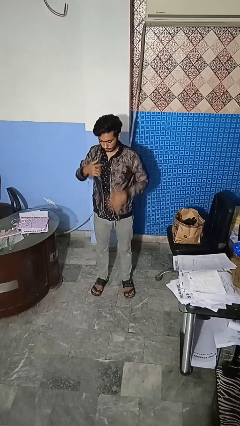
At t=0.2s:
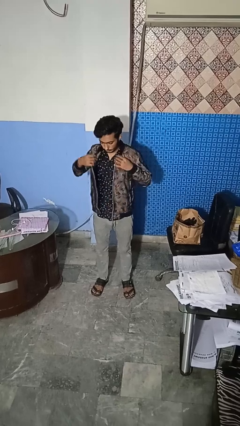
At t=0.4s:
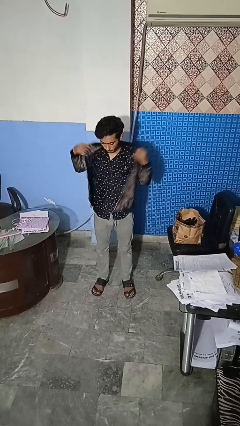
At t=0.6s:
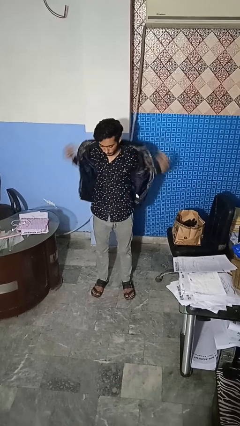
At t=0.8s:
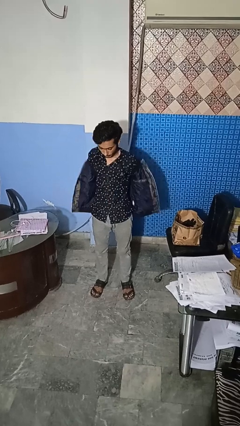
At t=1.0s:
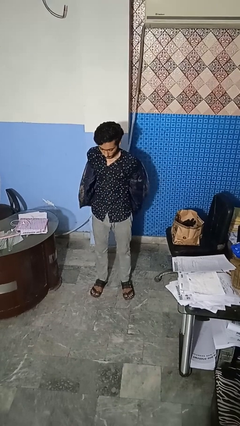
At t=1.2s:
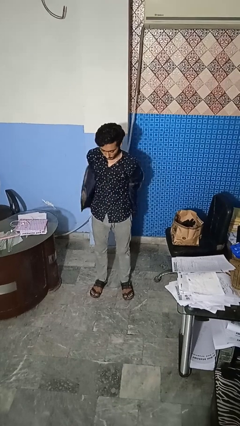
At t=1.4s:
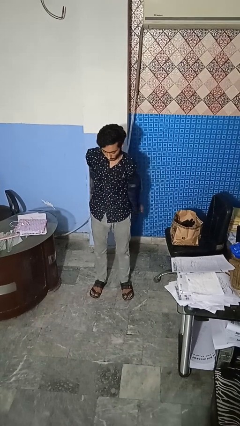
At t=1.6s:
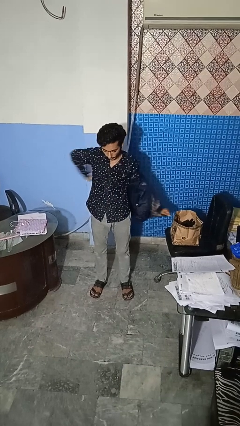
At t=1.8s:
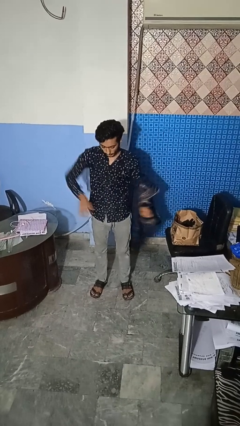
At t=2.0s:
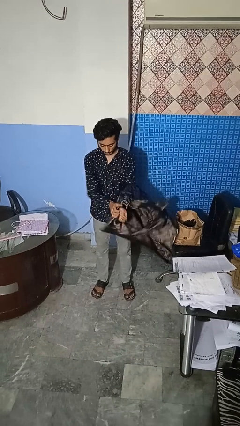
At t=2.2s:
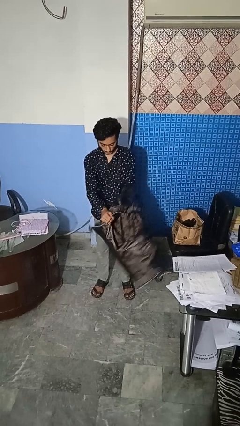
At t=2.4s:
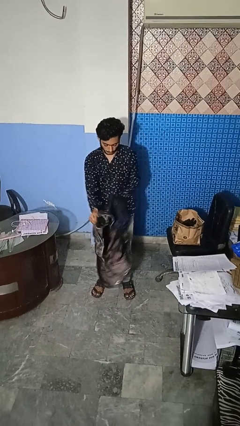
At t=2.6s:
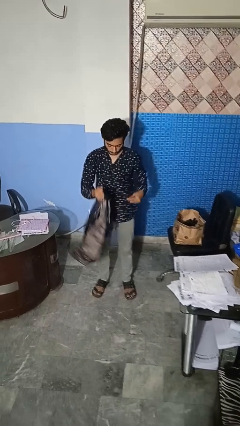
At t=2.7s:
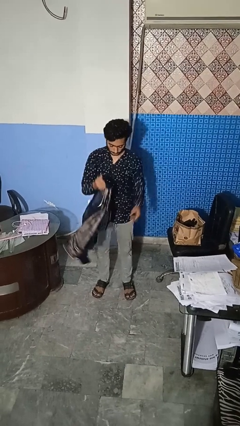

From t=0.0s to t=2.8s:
person takes off jacket

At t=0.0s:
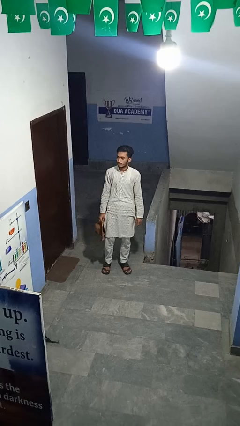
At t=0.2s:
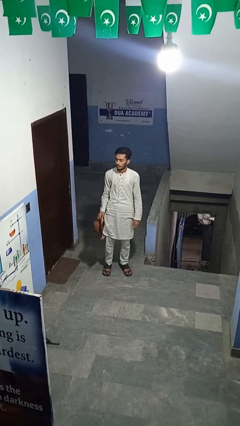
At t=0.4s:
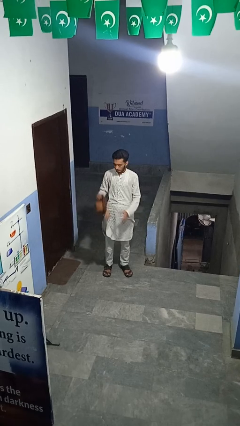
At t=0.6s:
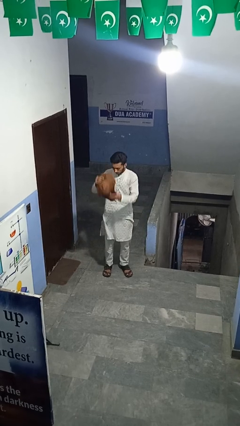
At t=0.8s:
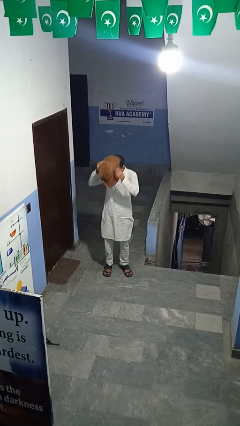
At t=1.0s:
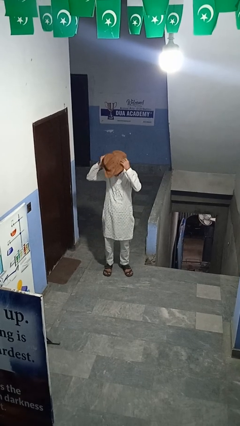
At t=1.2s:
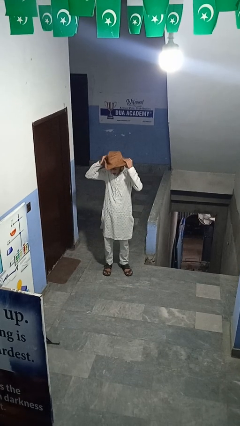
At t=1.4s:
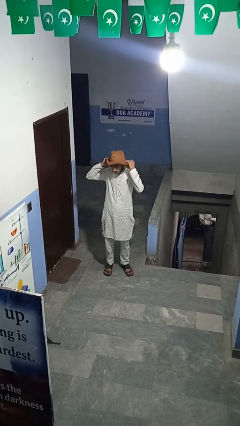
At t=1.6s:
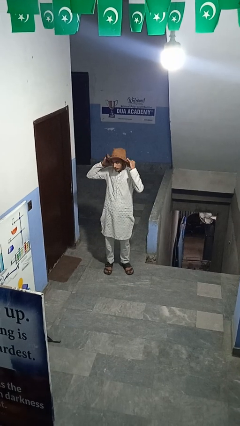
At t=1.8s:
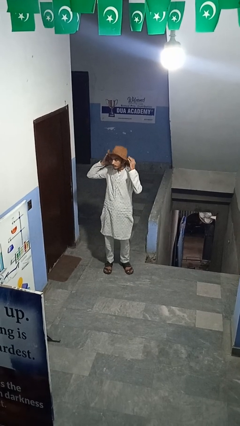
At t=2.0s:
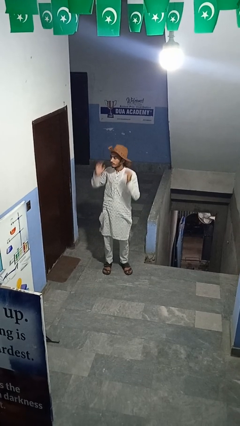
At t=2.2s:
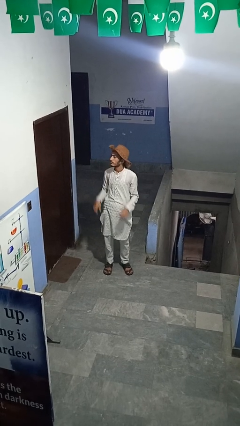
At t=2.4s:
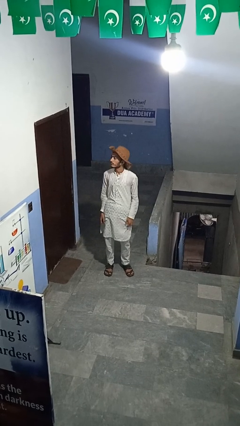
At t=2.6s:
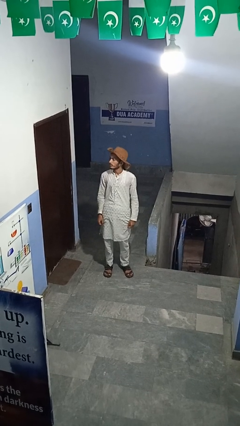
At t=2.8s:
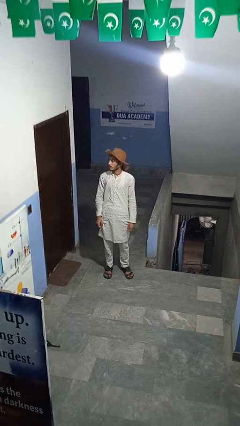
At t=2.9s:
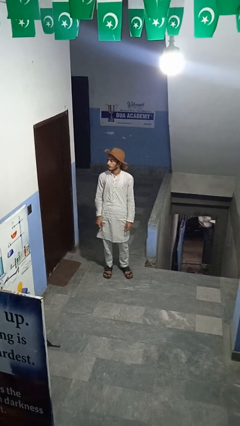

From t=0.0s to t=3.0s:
person puts on hat

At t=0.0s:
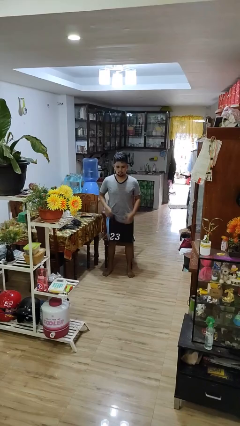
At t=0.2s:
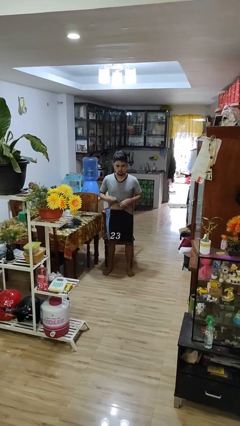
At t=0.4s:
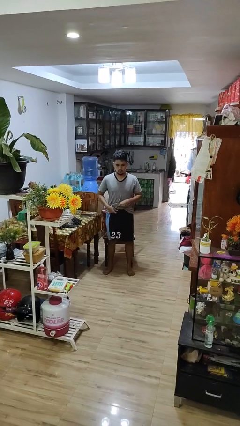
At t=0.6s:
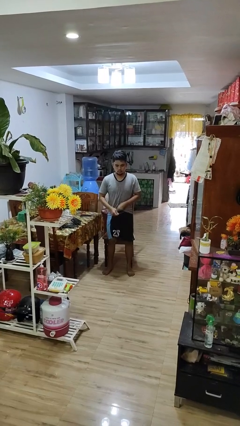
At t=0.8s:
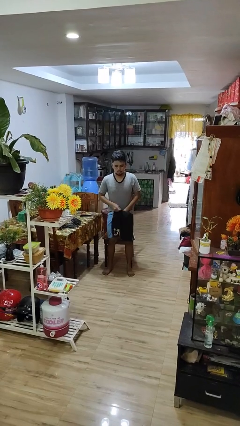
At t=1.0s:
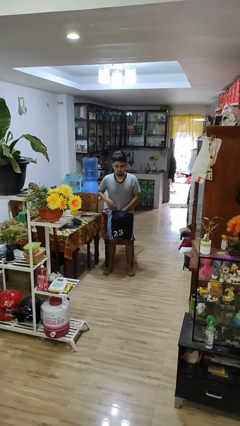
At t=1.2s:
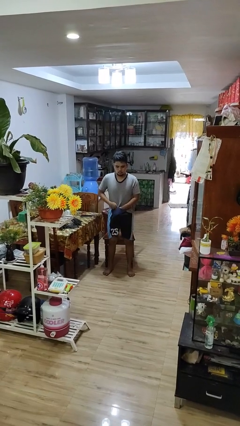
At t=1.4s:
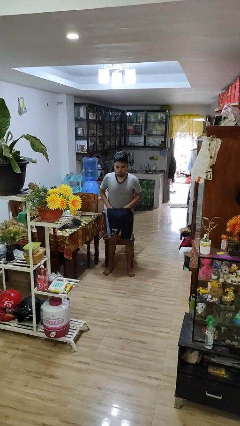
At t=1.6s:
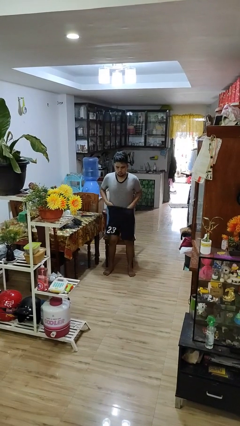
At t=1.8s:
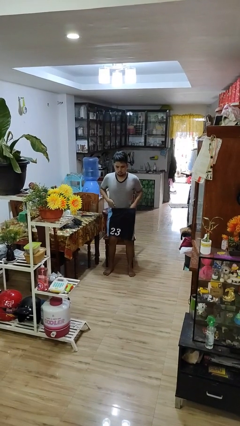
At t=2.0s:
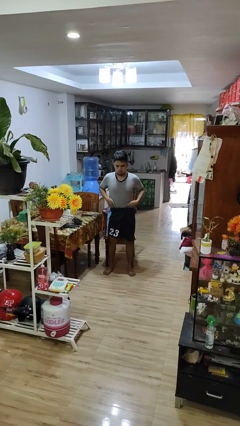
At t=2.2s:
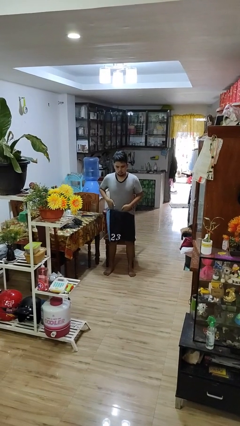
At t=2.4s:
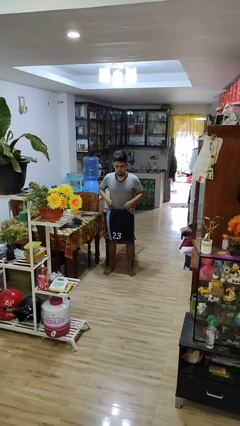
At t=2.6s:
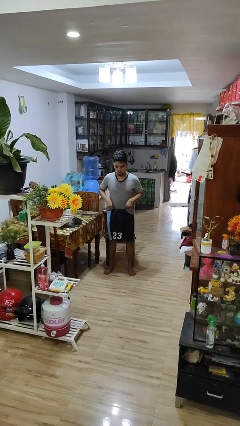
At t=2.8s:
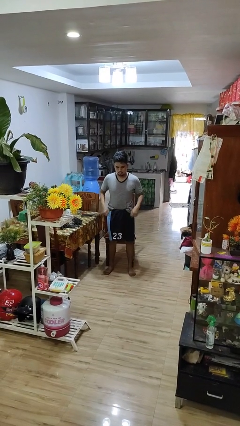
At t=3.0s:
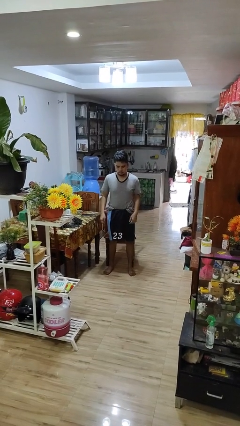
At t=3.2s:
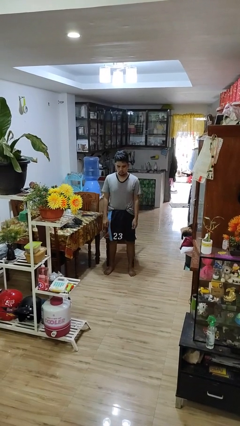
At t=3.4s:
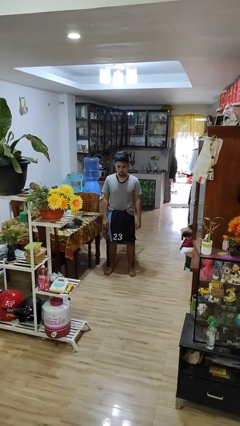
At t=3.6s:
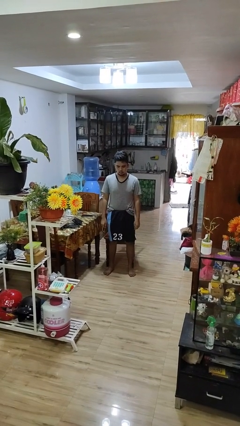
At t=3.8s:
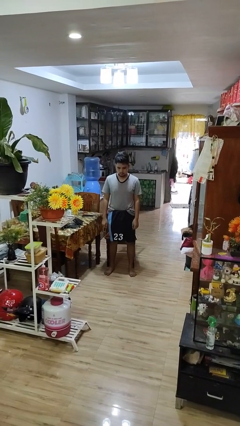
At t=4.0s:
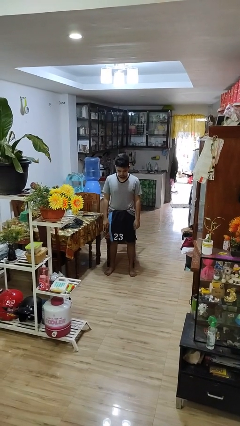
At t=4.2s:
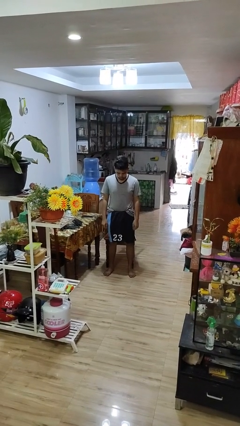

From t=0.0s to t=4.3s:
person tucks in shirt

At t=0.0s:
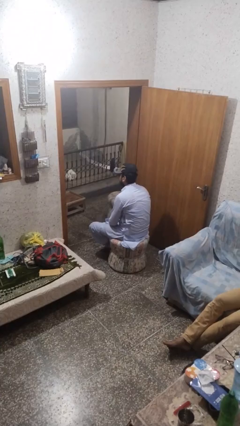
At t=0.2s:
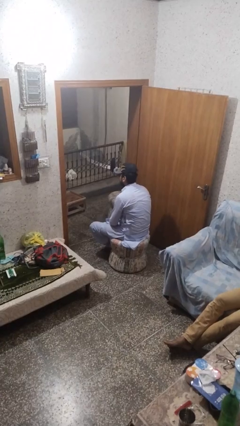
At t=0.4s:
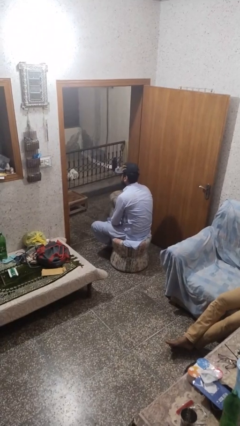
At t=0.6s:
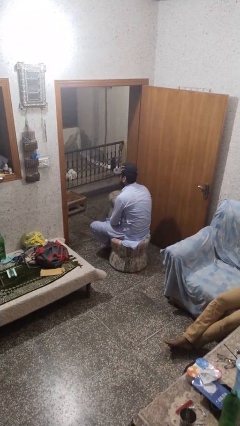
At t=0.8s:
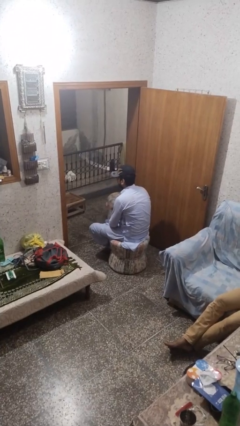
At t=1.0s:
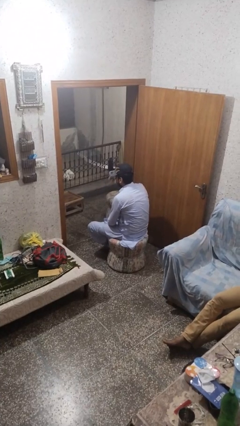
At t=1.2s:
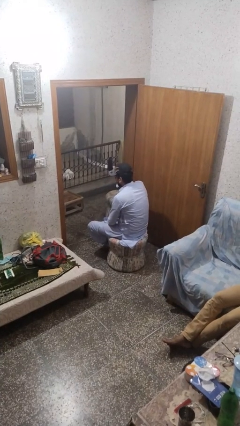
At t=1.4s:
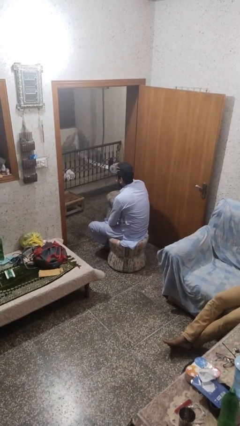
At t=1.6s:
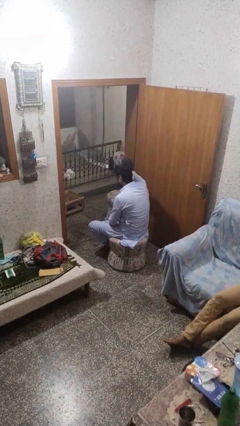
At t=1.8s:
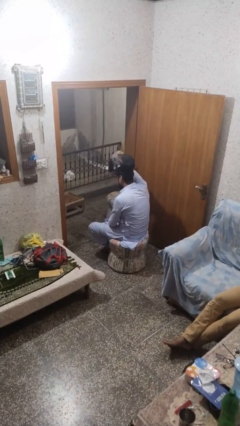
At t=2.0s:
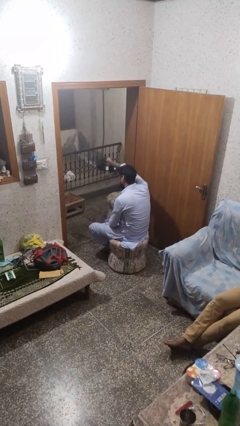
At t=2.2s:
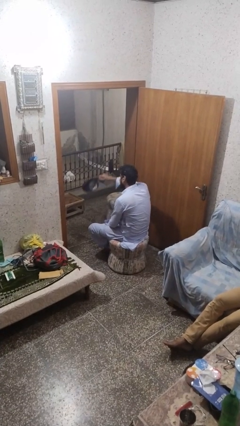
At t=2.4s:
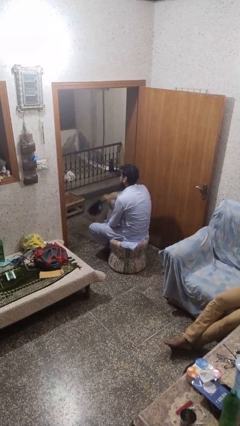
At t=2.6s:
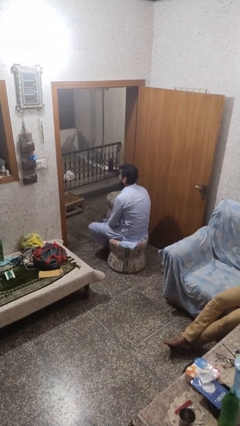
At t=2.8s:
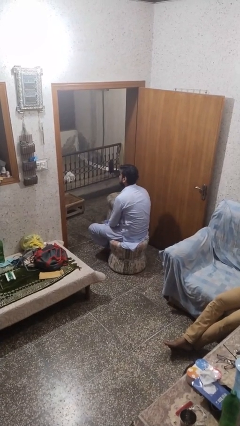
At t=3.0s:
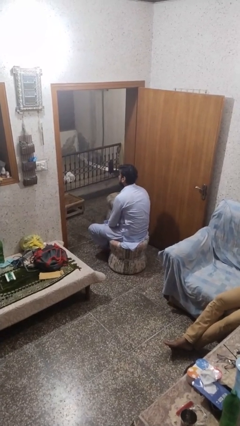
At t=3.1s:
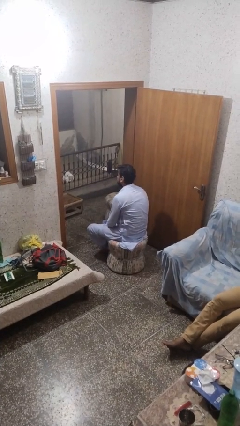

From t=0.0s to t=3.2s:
person takes off hat

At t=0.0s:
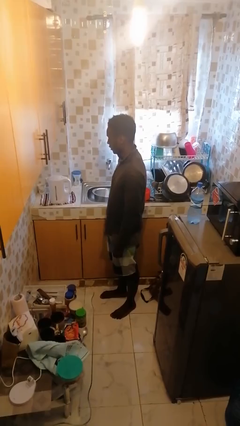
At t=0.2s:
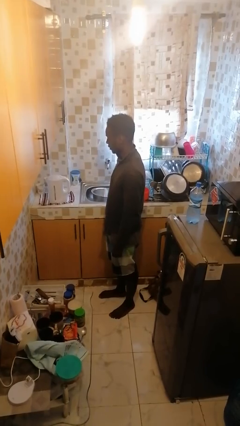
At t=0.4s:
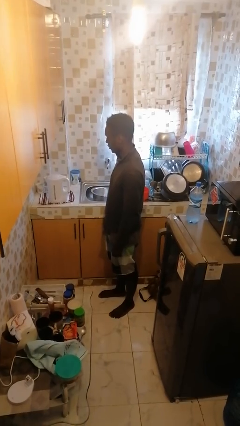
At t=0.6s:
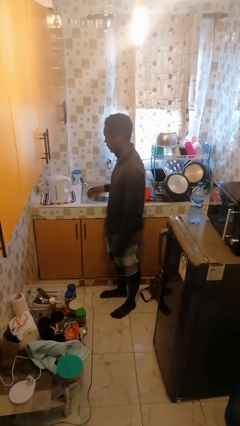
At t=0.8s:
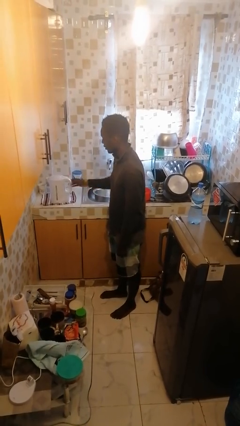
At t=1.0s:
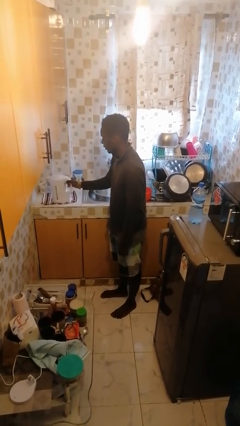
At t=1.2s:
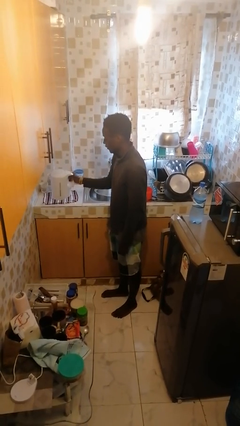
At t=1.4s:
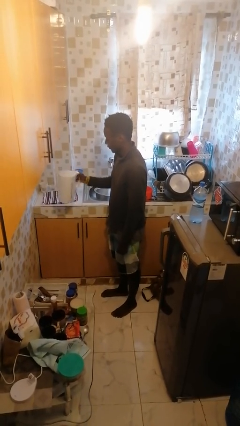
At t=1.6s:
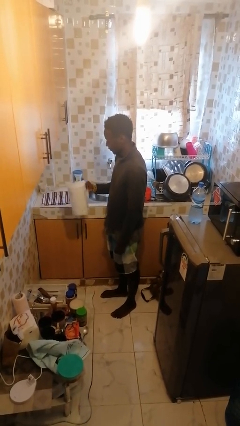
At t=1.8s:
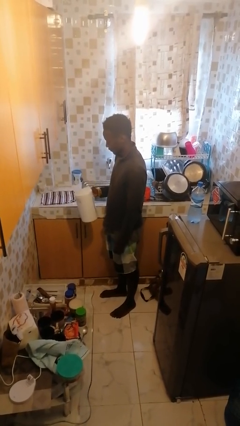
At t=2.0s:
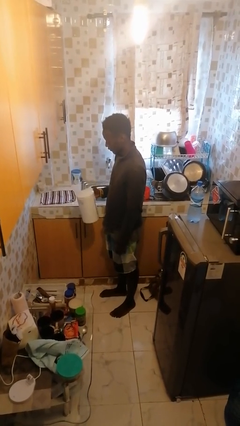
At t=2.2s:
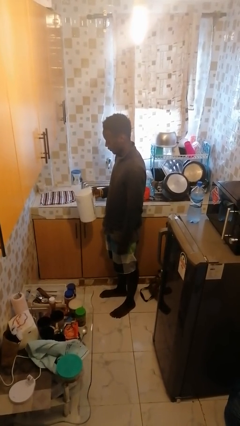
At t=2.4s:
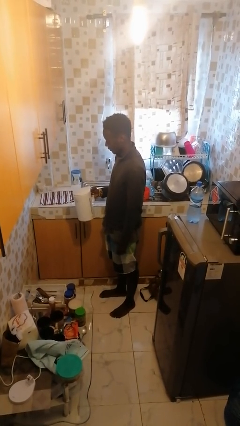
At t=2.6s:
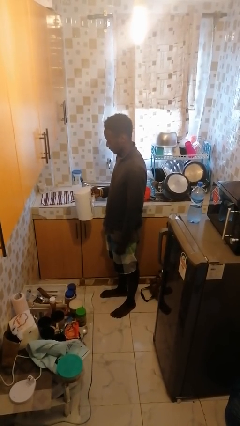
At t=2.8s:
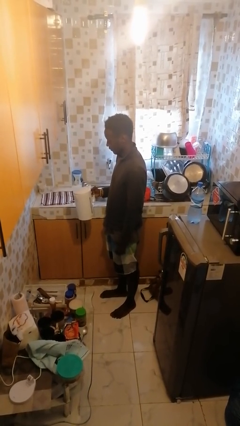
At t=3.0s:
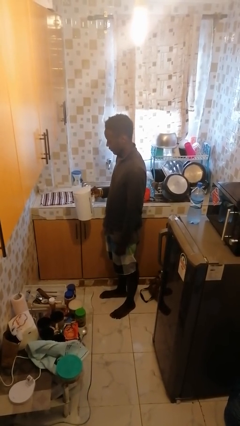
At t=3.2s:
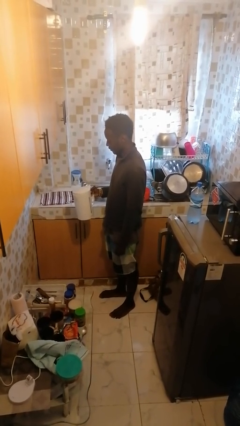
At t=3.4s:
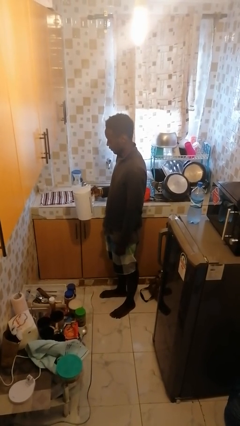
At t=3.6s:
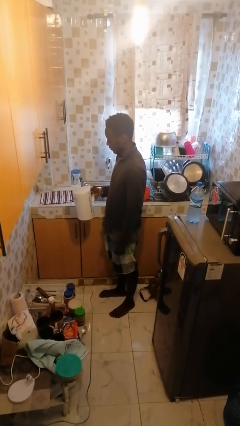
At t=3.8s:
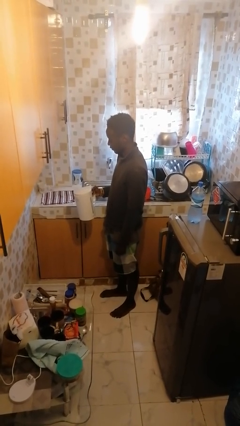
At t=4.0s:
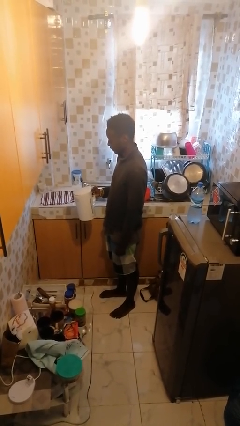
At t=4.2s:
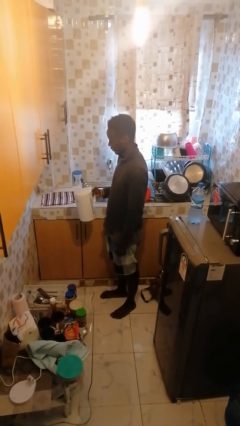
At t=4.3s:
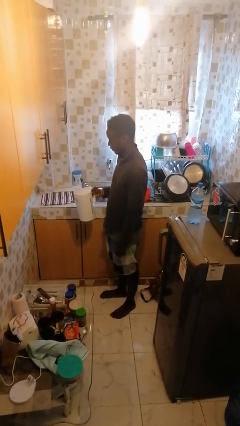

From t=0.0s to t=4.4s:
person picks up object from countertop
